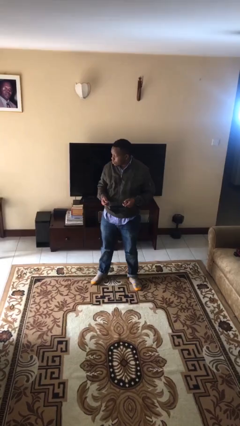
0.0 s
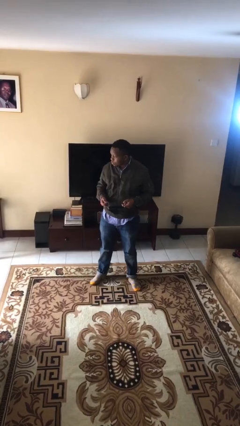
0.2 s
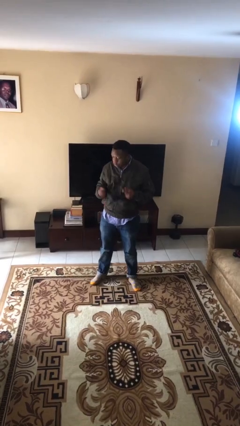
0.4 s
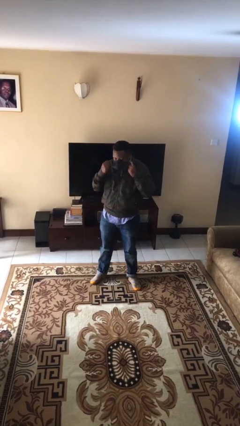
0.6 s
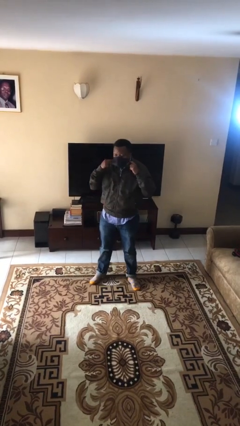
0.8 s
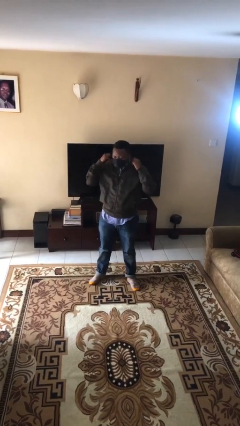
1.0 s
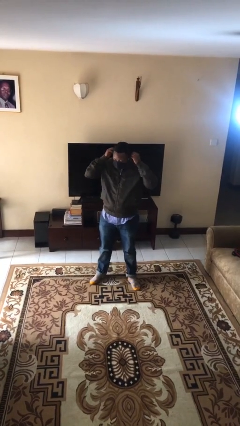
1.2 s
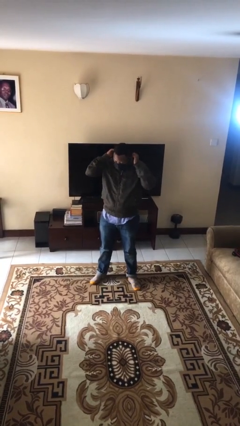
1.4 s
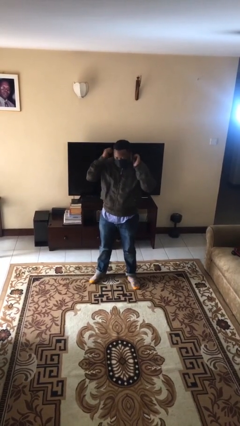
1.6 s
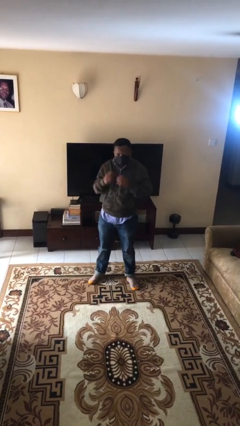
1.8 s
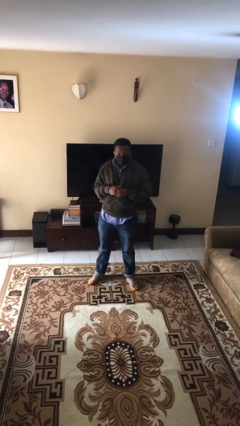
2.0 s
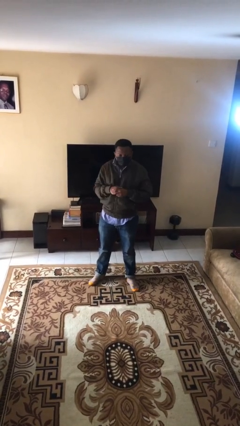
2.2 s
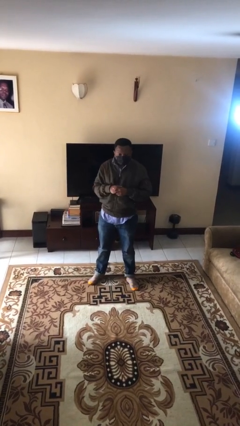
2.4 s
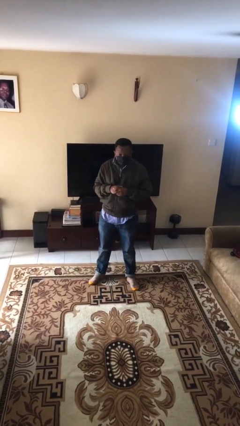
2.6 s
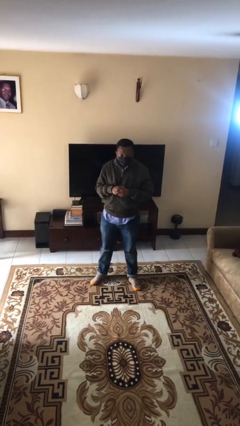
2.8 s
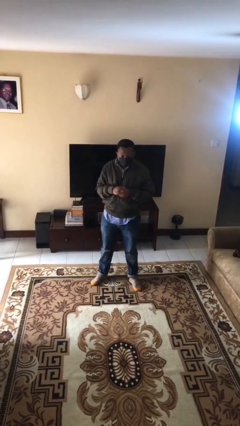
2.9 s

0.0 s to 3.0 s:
person puts on facemask

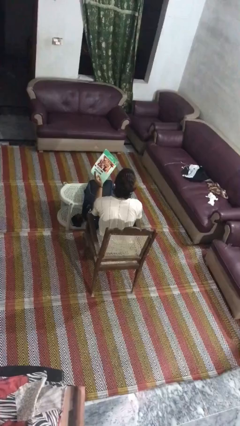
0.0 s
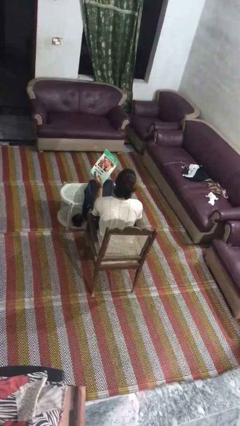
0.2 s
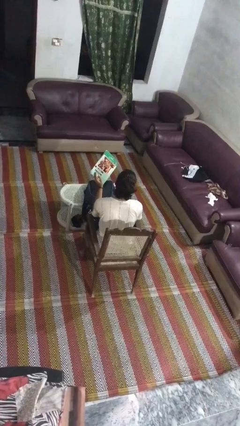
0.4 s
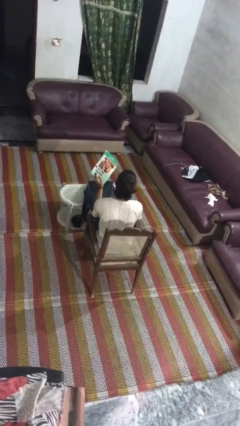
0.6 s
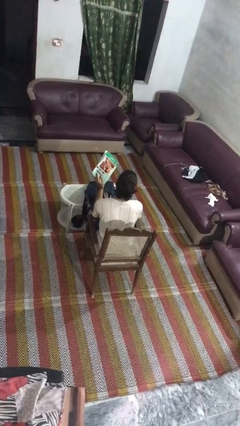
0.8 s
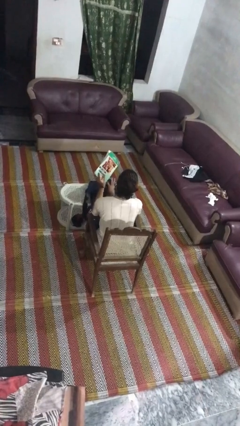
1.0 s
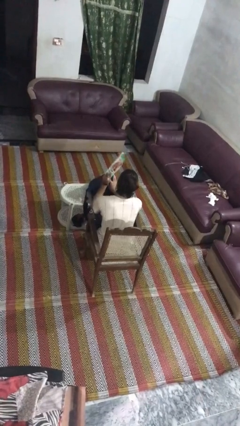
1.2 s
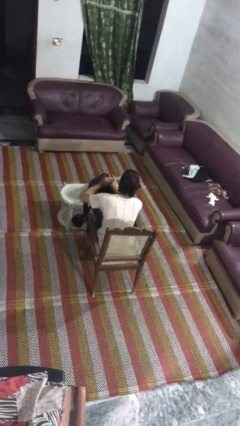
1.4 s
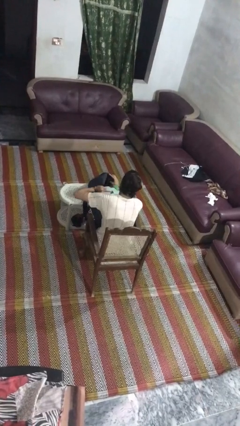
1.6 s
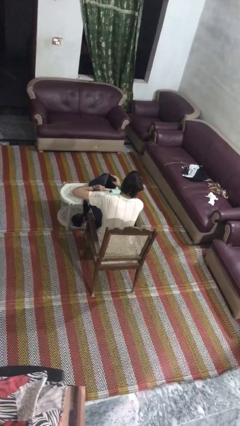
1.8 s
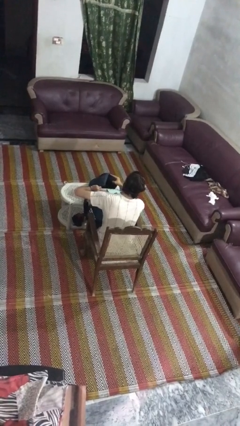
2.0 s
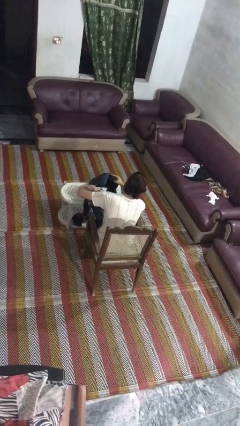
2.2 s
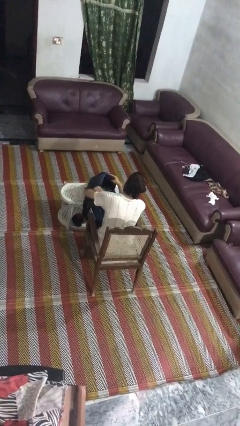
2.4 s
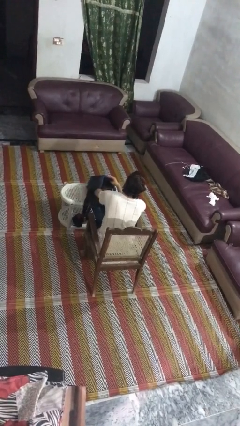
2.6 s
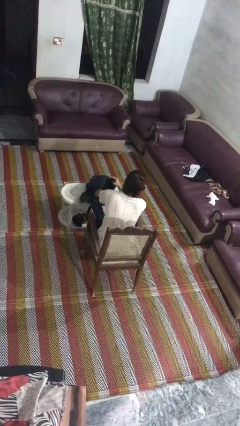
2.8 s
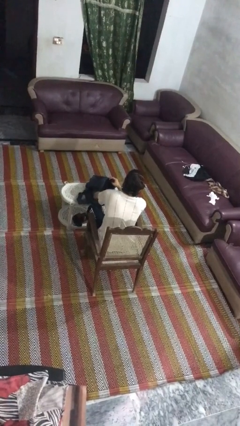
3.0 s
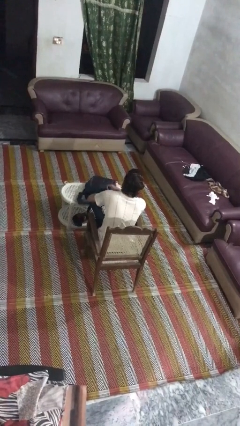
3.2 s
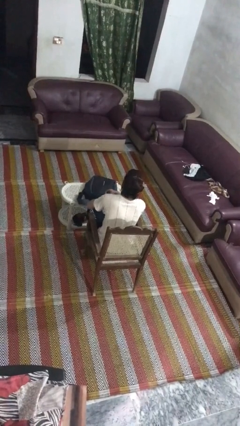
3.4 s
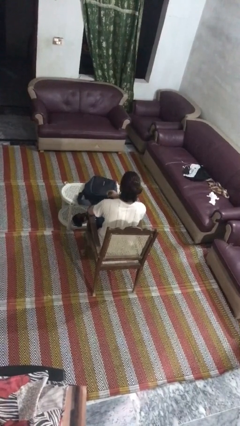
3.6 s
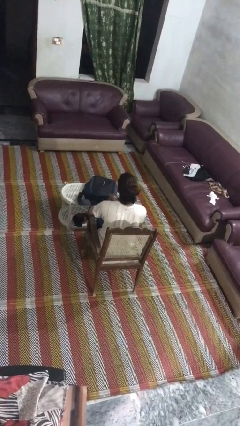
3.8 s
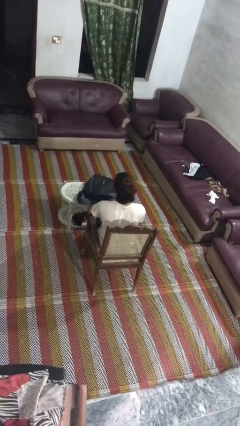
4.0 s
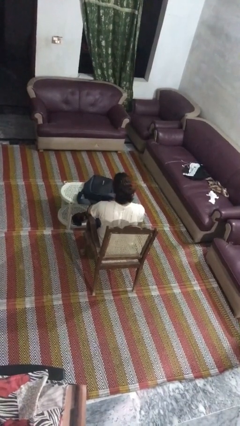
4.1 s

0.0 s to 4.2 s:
person puts object into backpack

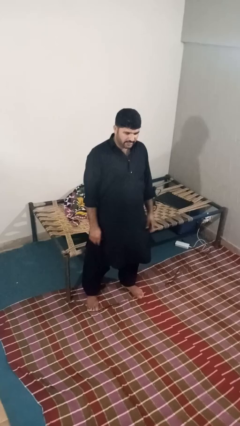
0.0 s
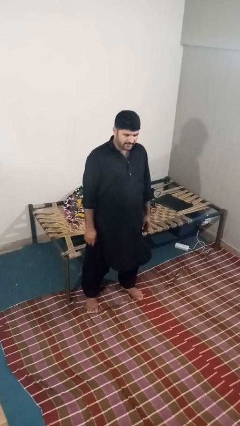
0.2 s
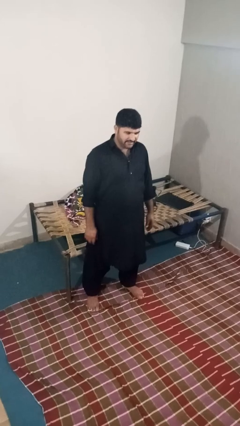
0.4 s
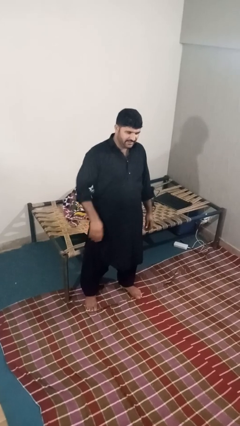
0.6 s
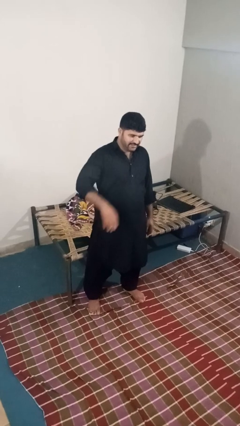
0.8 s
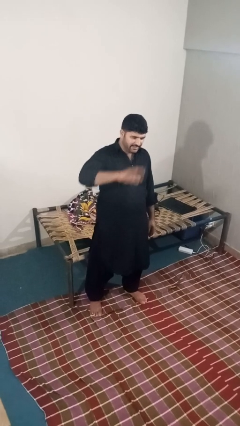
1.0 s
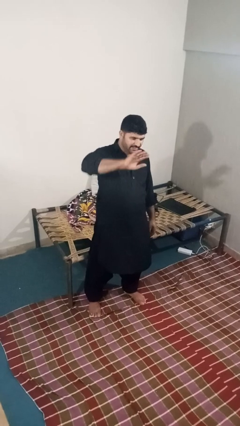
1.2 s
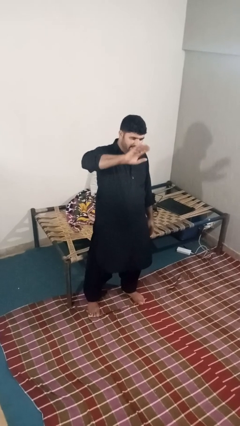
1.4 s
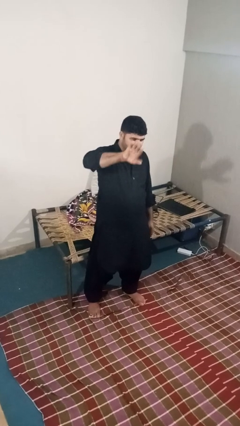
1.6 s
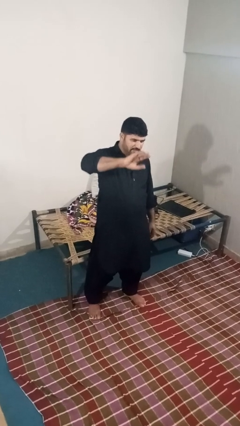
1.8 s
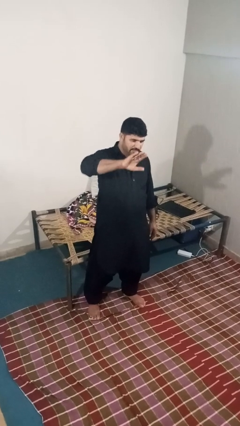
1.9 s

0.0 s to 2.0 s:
person gestures swipe right

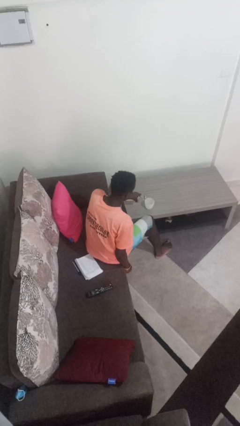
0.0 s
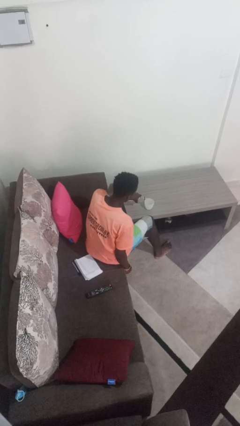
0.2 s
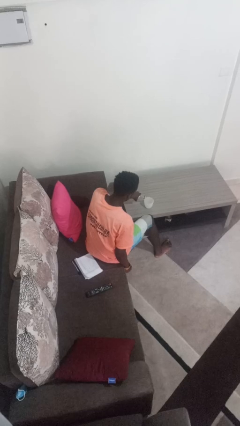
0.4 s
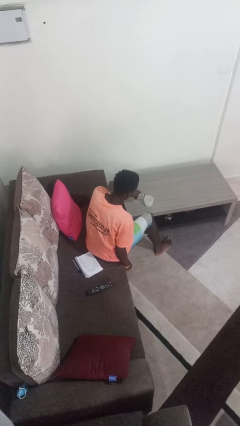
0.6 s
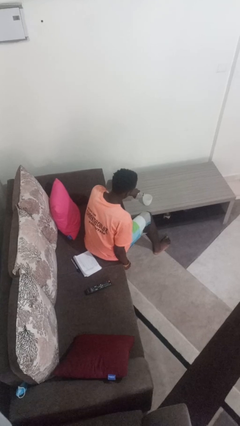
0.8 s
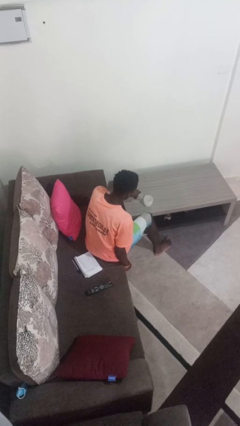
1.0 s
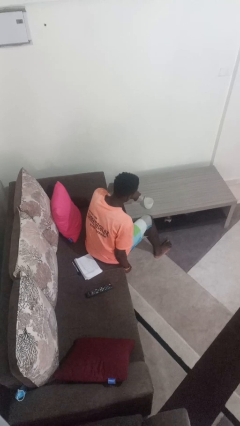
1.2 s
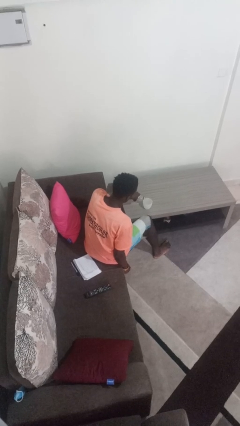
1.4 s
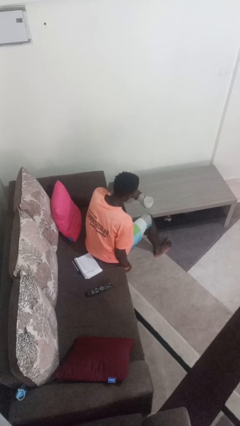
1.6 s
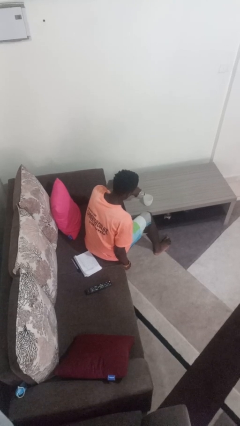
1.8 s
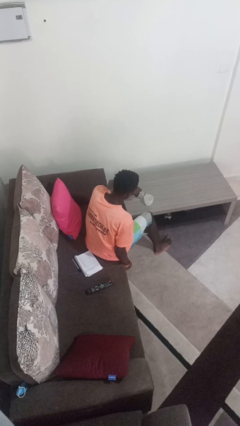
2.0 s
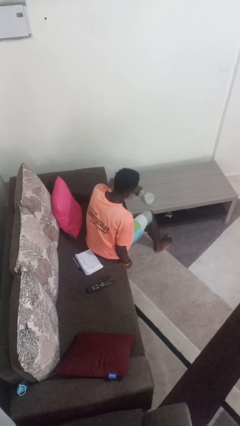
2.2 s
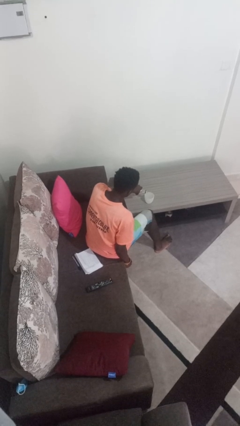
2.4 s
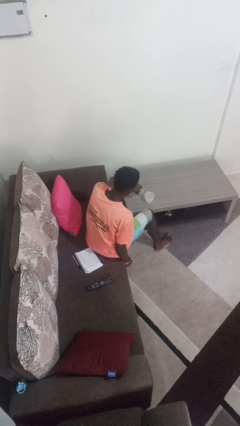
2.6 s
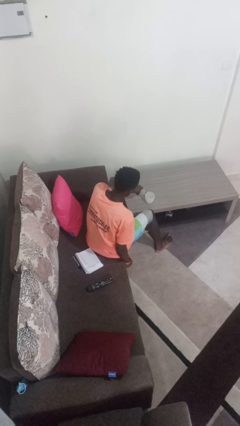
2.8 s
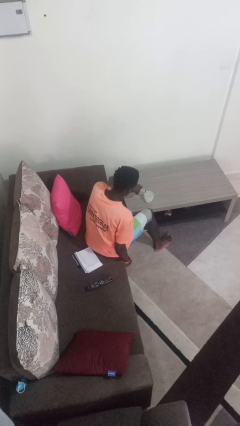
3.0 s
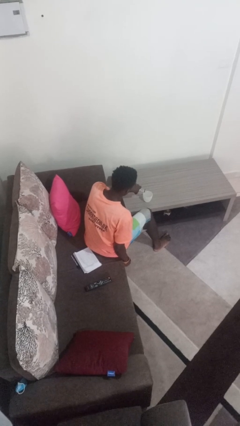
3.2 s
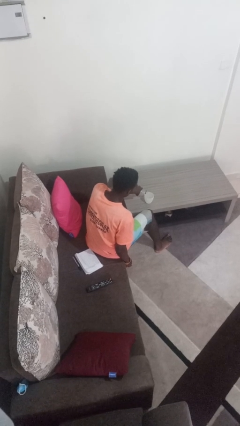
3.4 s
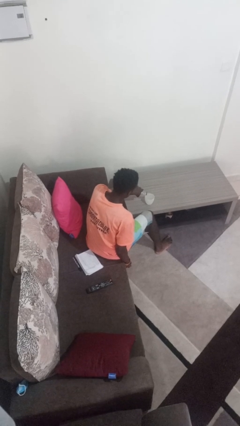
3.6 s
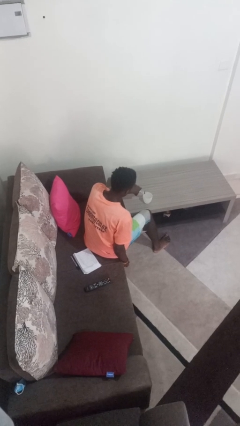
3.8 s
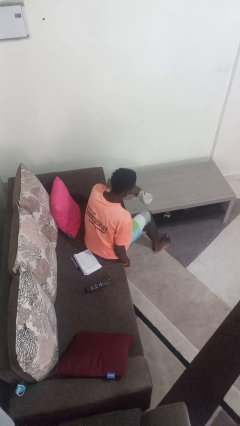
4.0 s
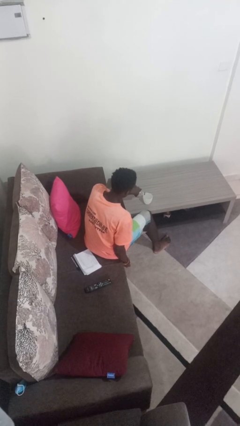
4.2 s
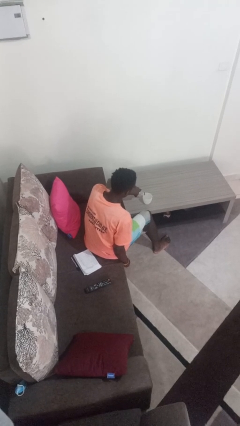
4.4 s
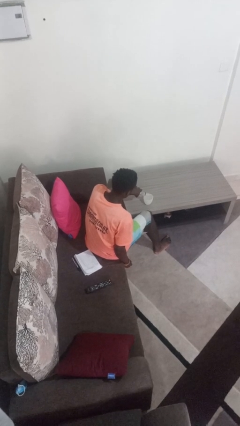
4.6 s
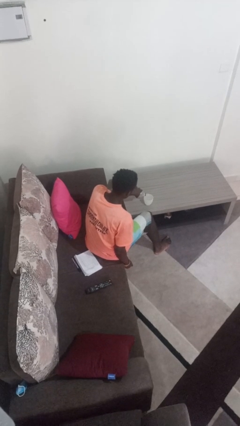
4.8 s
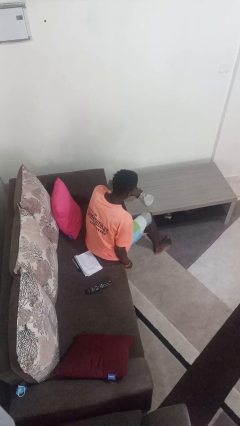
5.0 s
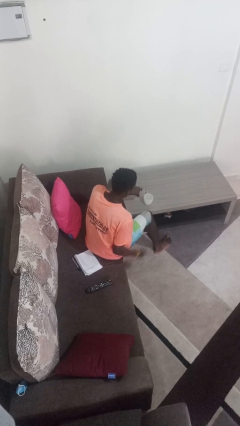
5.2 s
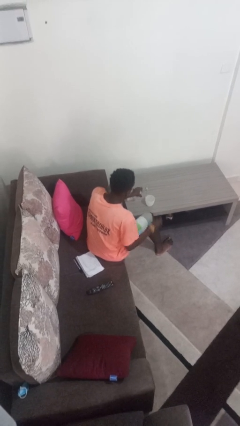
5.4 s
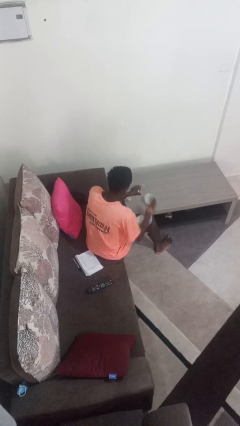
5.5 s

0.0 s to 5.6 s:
person pours liquid into cup

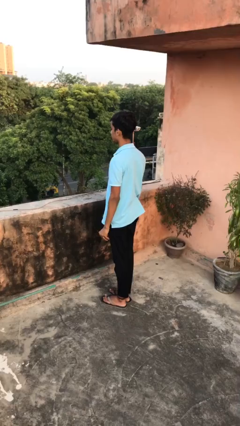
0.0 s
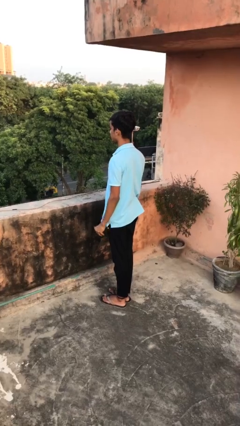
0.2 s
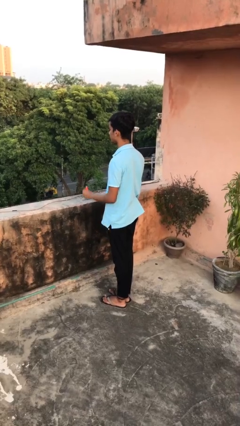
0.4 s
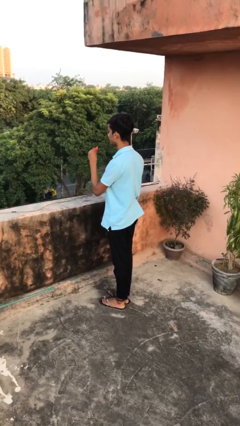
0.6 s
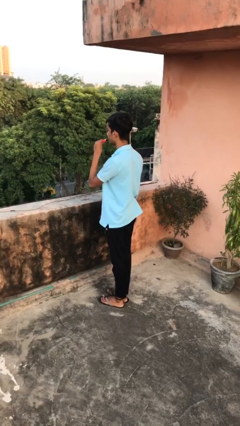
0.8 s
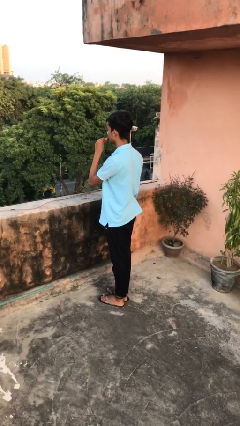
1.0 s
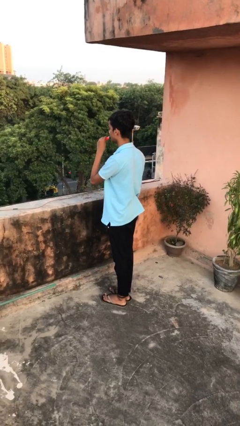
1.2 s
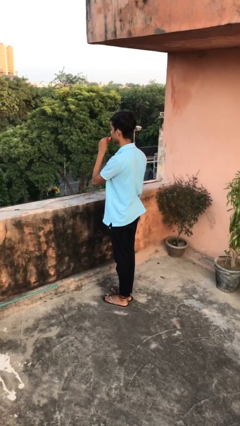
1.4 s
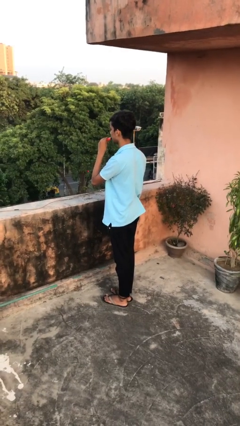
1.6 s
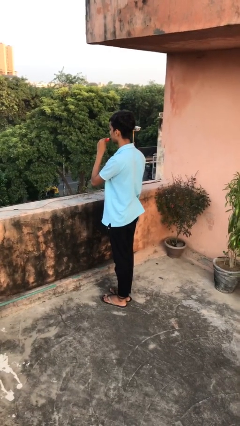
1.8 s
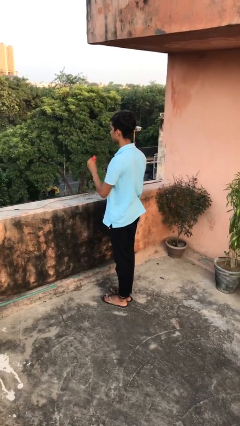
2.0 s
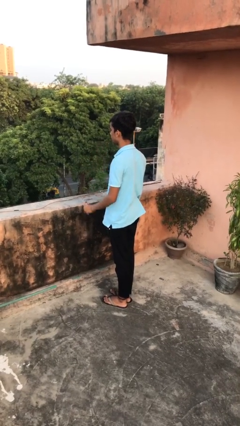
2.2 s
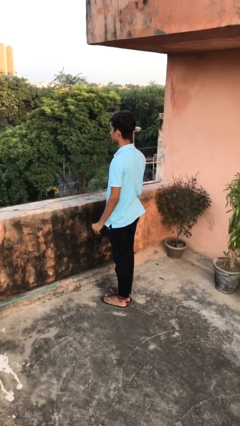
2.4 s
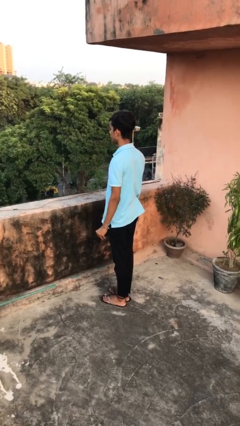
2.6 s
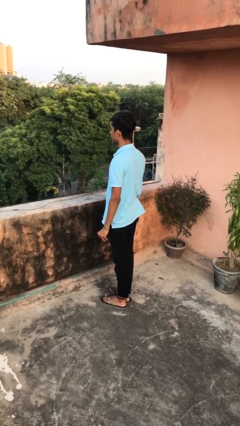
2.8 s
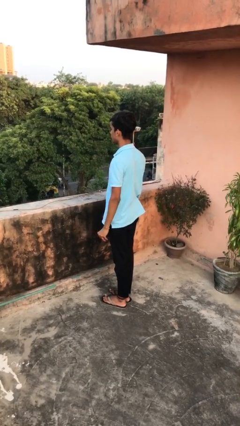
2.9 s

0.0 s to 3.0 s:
person vapes
